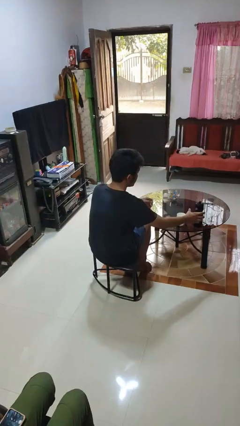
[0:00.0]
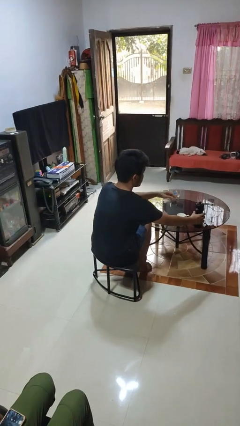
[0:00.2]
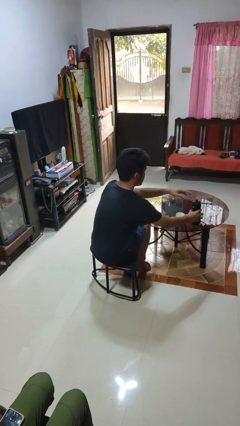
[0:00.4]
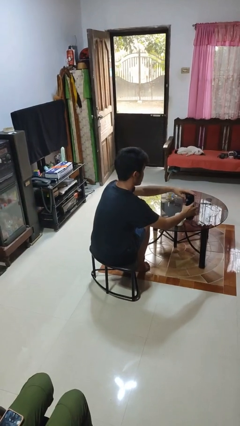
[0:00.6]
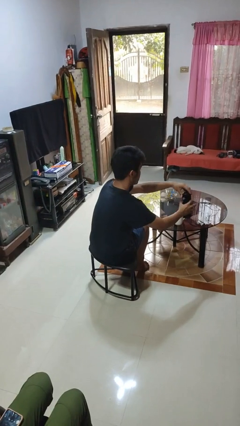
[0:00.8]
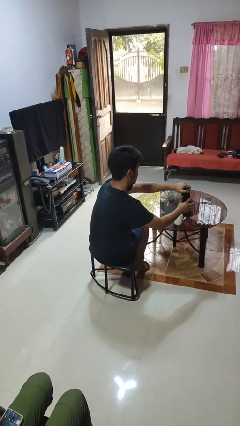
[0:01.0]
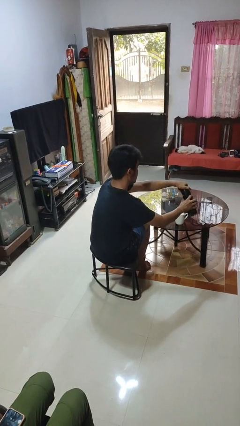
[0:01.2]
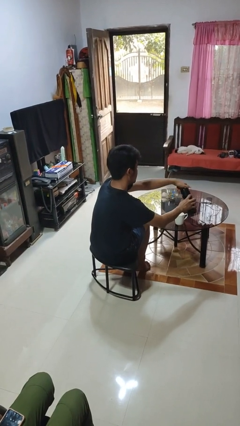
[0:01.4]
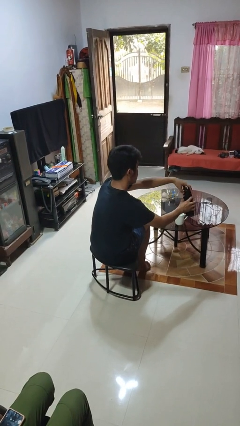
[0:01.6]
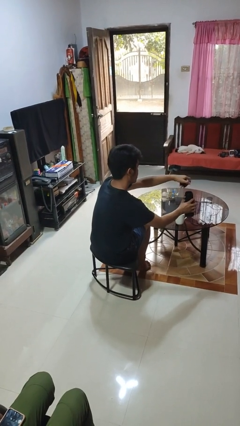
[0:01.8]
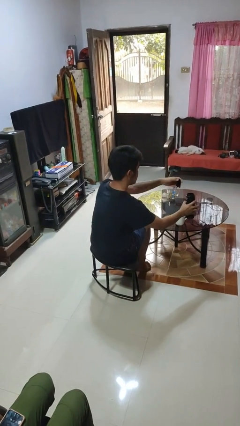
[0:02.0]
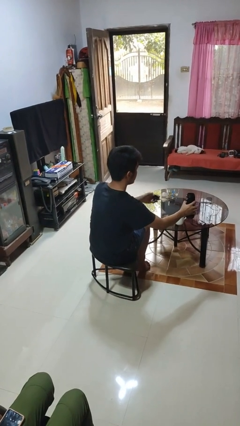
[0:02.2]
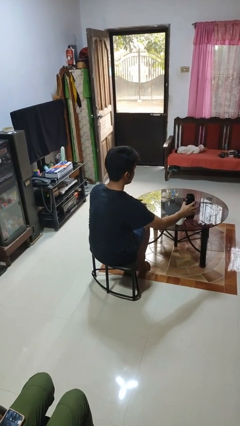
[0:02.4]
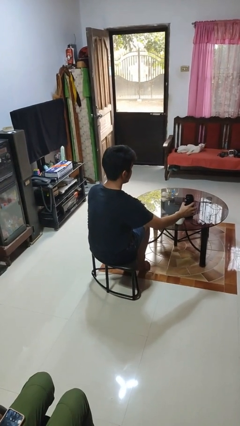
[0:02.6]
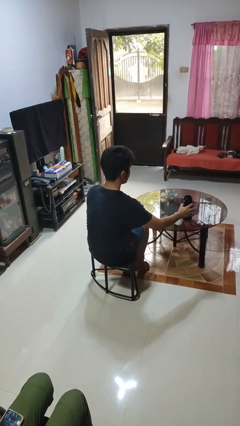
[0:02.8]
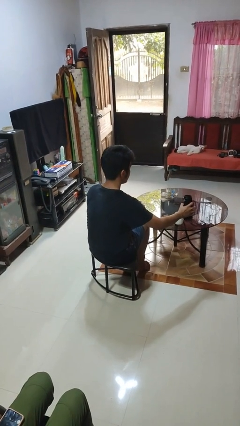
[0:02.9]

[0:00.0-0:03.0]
person unscrews lid from bottle

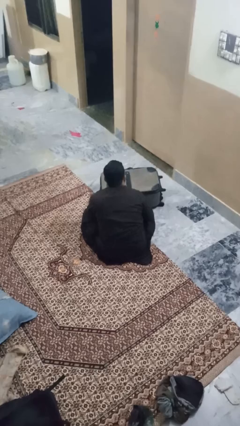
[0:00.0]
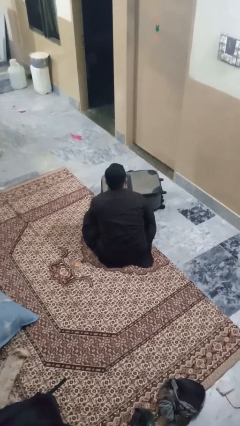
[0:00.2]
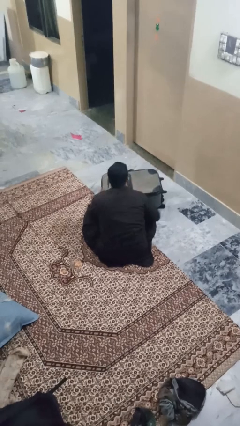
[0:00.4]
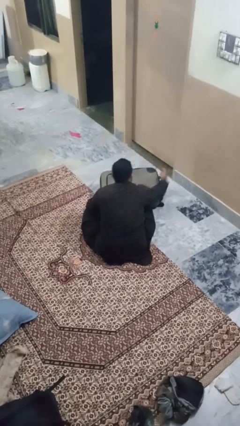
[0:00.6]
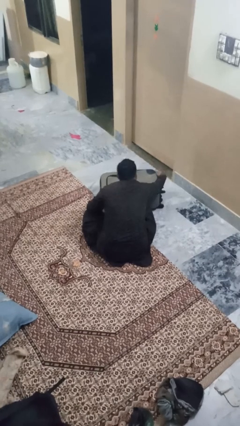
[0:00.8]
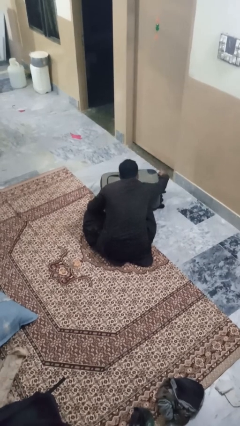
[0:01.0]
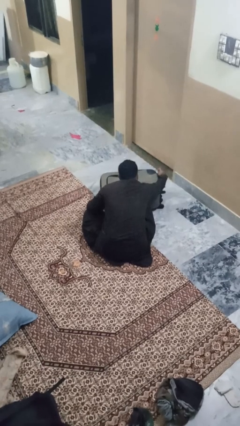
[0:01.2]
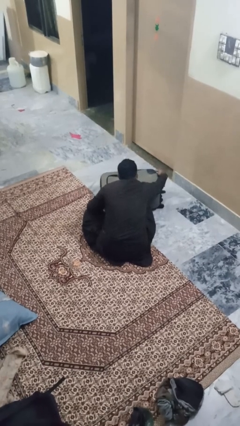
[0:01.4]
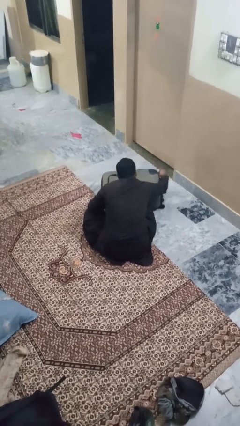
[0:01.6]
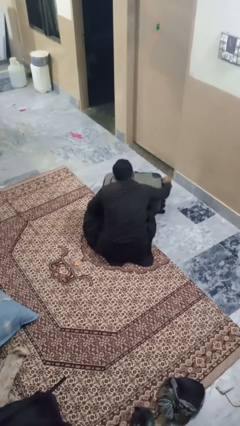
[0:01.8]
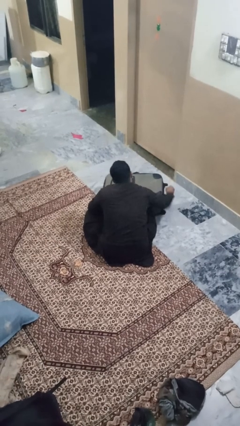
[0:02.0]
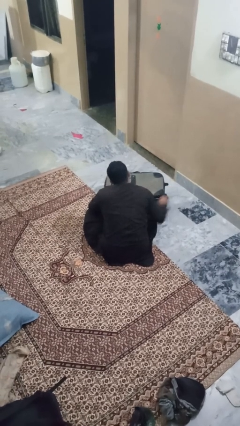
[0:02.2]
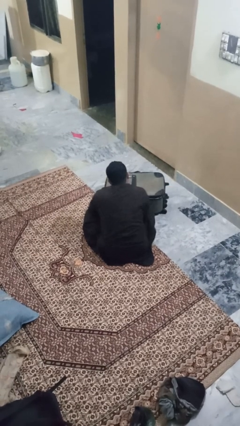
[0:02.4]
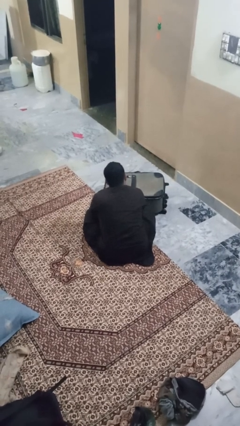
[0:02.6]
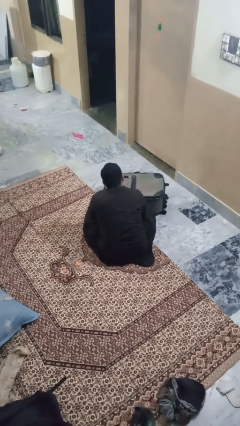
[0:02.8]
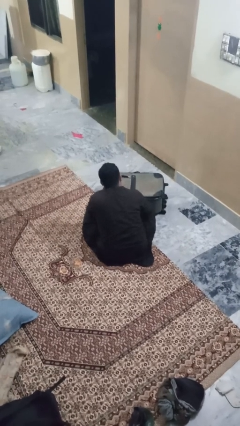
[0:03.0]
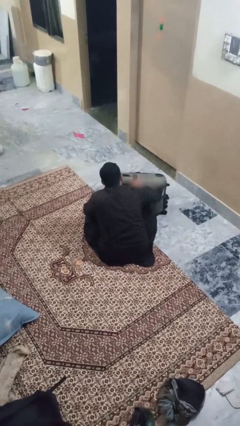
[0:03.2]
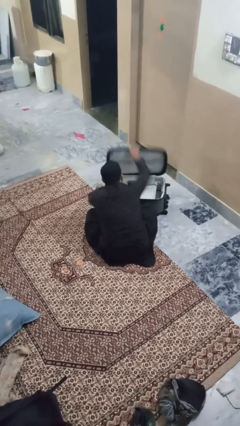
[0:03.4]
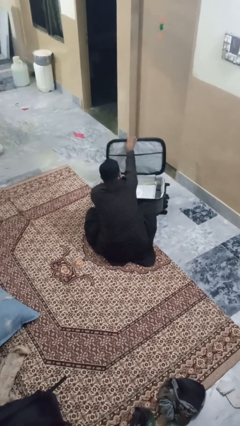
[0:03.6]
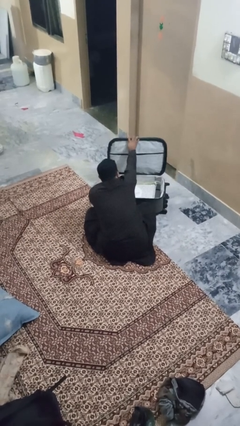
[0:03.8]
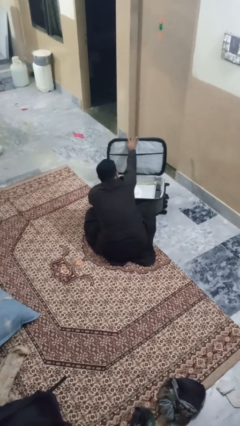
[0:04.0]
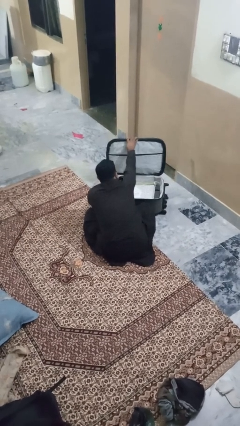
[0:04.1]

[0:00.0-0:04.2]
person opens suitcase

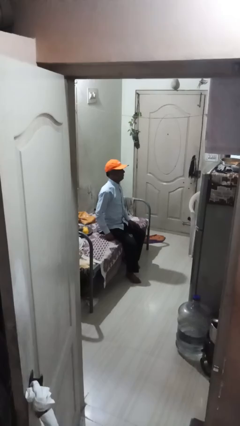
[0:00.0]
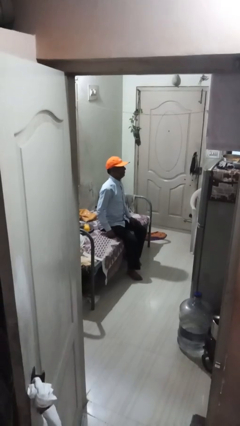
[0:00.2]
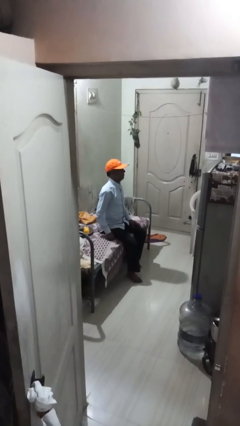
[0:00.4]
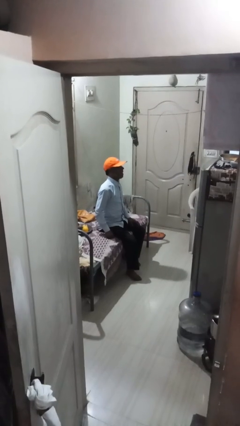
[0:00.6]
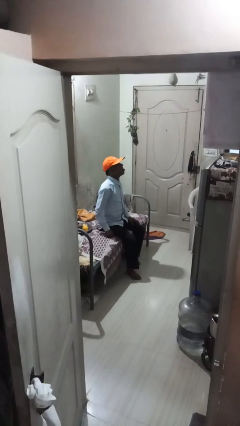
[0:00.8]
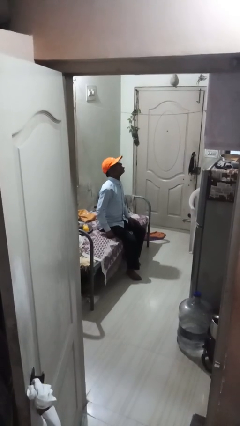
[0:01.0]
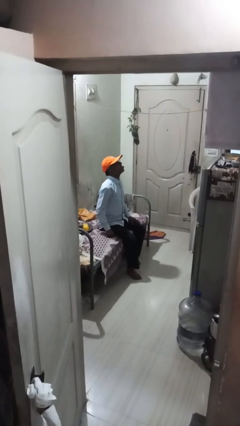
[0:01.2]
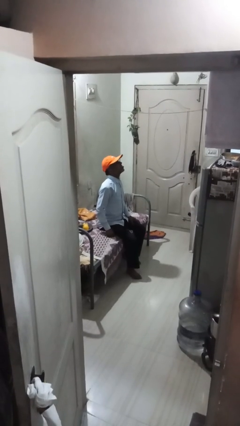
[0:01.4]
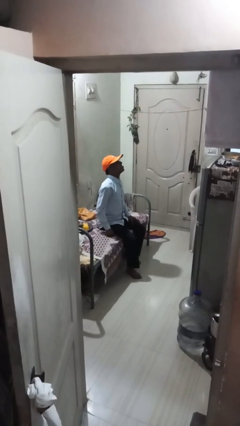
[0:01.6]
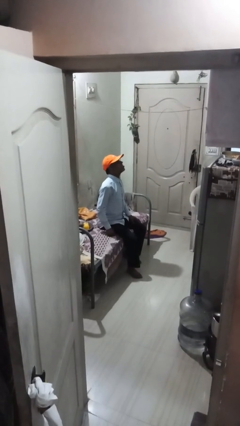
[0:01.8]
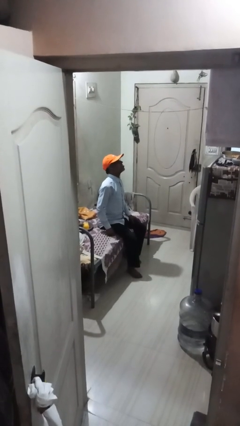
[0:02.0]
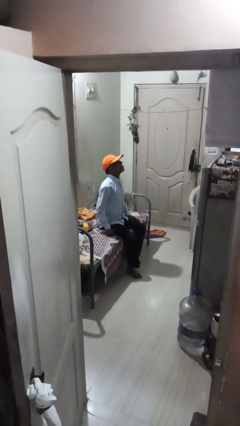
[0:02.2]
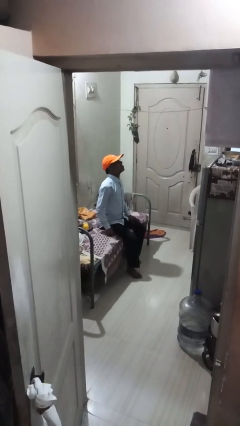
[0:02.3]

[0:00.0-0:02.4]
person sticks out tongue

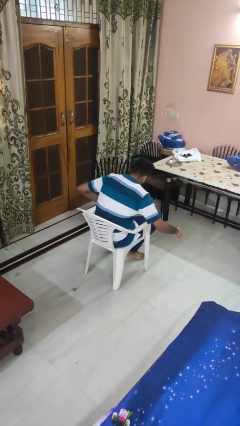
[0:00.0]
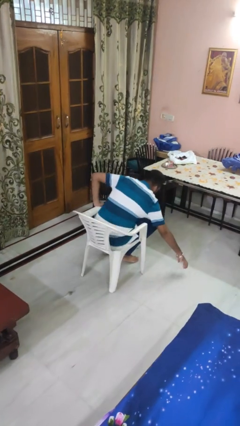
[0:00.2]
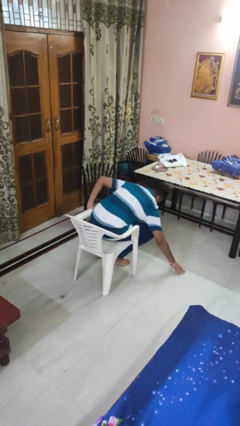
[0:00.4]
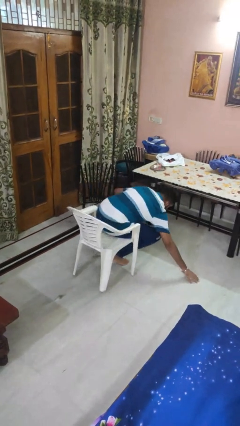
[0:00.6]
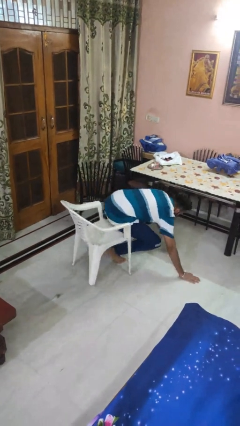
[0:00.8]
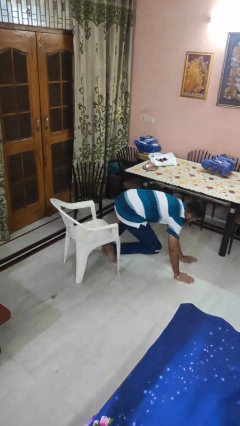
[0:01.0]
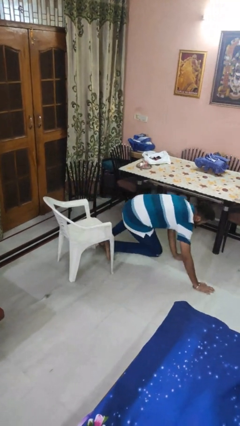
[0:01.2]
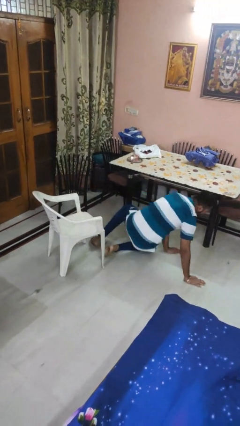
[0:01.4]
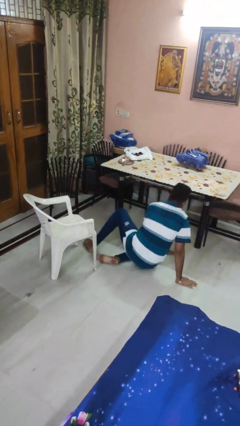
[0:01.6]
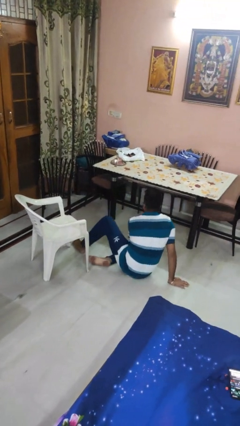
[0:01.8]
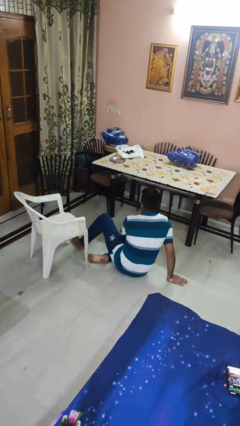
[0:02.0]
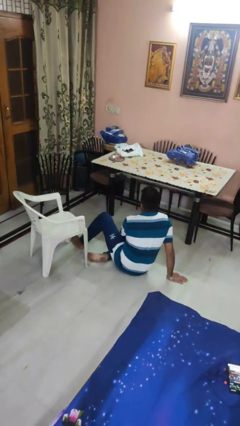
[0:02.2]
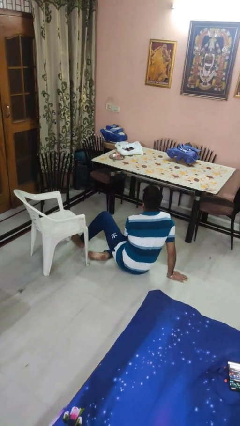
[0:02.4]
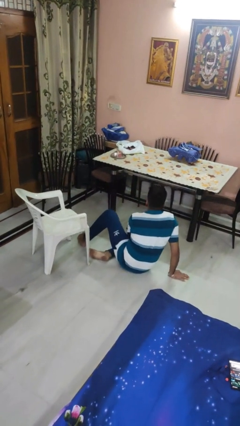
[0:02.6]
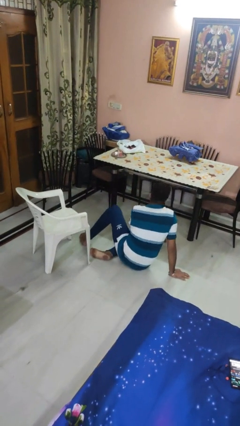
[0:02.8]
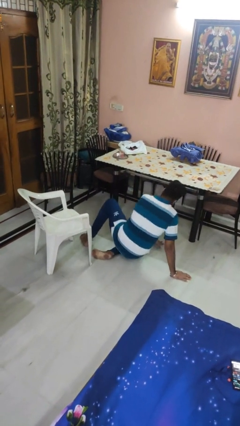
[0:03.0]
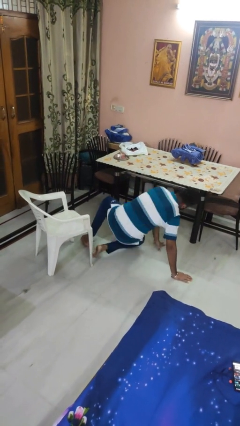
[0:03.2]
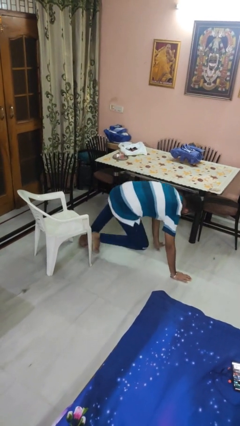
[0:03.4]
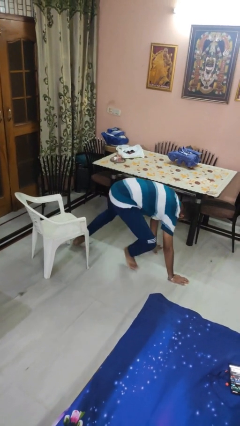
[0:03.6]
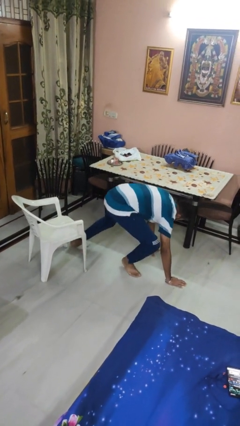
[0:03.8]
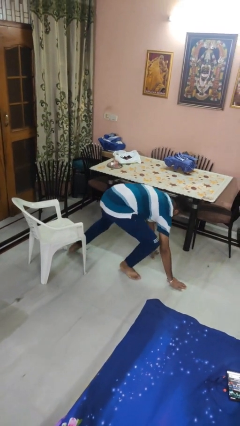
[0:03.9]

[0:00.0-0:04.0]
person falls from chair

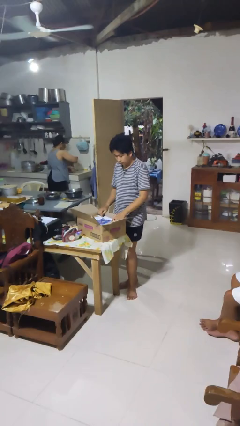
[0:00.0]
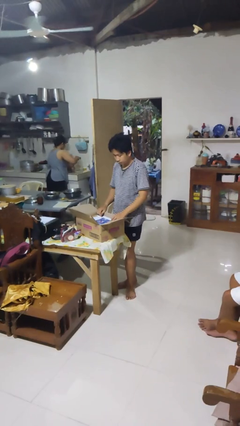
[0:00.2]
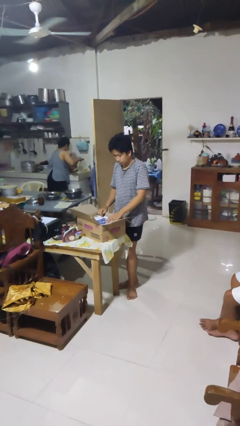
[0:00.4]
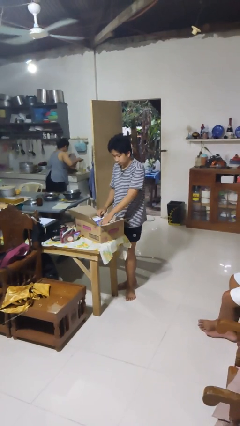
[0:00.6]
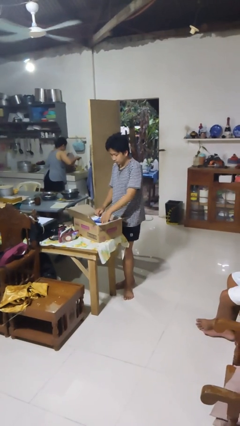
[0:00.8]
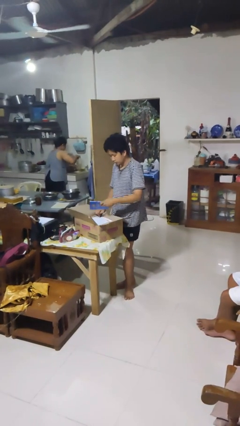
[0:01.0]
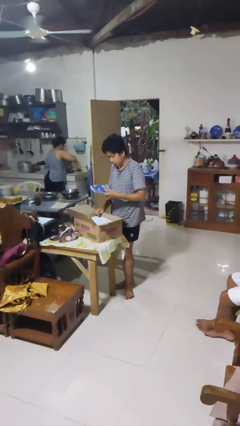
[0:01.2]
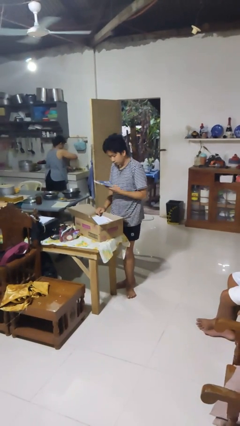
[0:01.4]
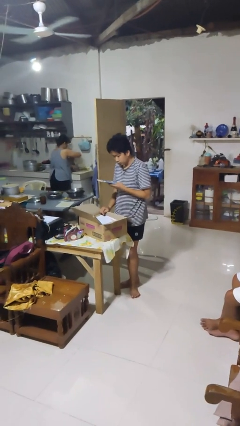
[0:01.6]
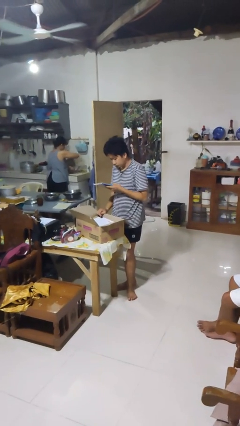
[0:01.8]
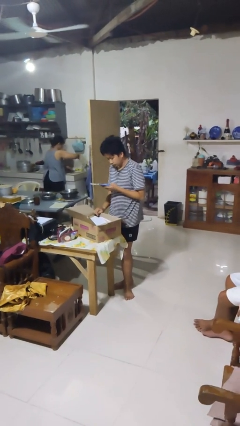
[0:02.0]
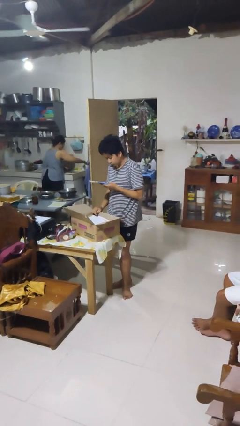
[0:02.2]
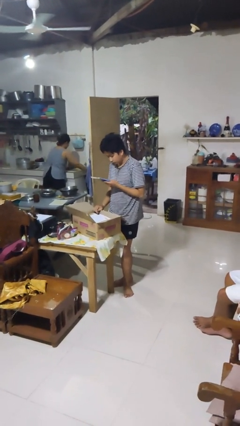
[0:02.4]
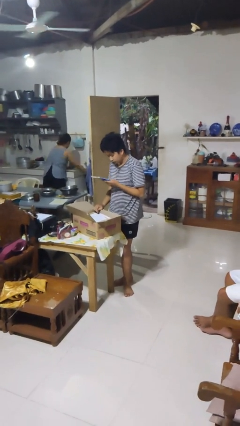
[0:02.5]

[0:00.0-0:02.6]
person takes object from box

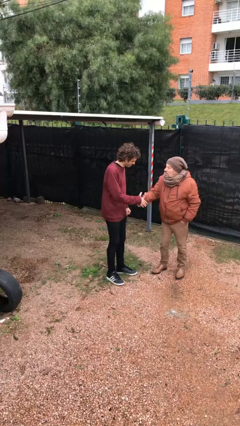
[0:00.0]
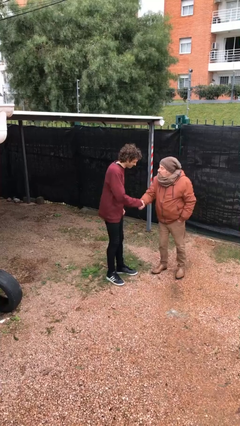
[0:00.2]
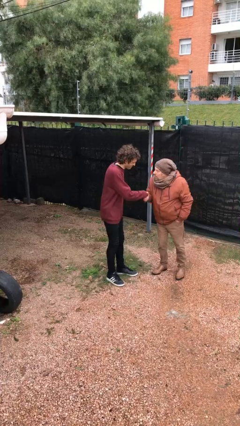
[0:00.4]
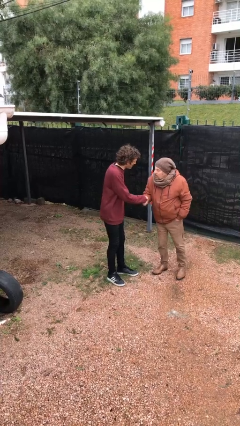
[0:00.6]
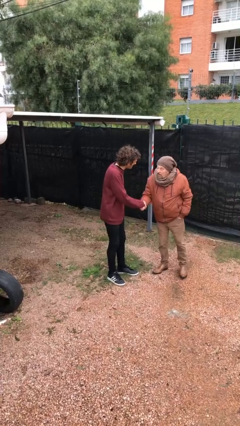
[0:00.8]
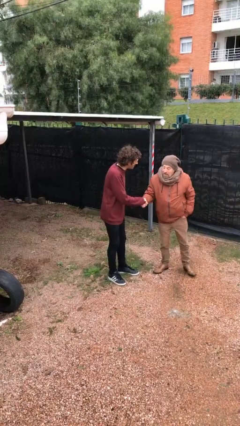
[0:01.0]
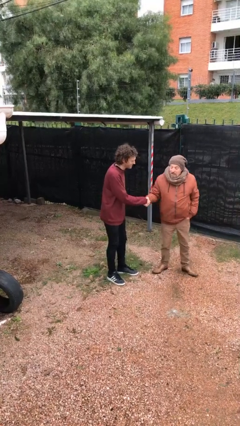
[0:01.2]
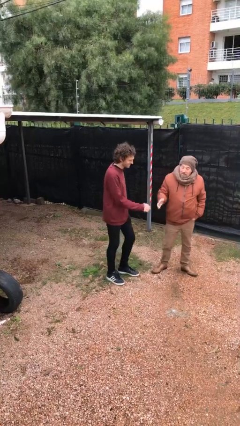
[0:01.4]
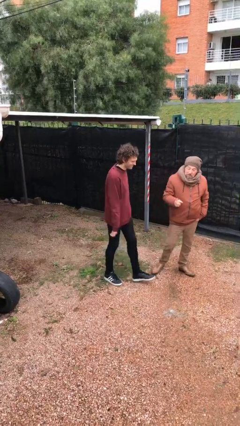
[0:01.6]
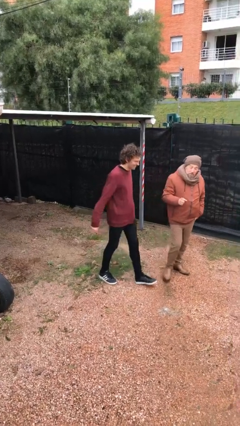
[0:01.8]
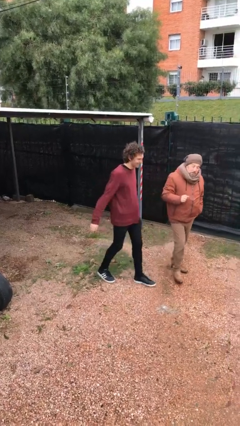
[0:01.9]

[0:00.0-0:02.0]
person shakes hand
